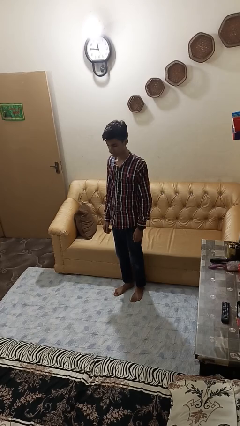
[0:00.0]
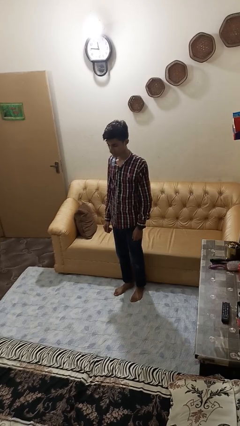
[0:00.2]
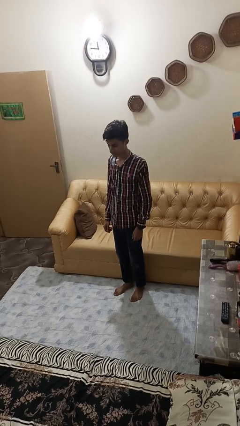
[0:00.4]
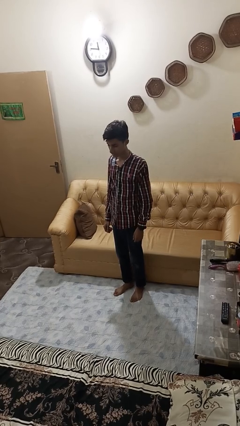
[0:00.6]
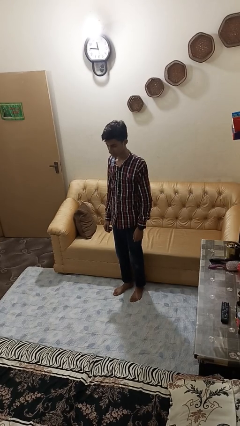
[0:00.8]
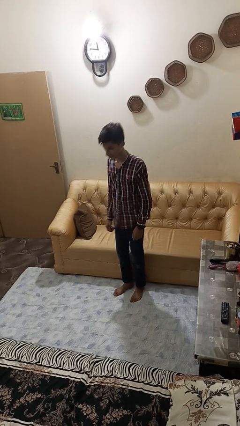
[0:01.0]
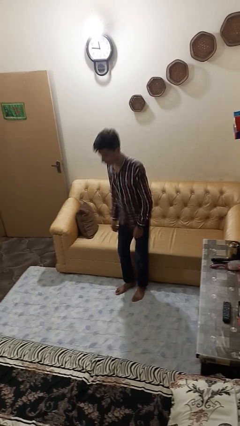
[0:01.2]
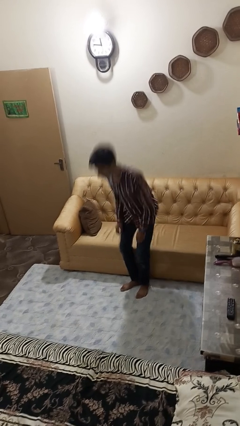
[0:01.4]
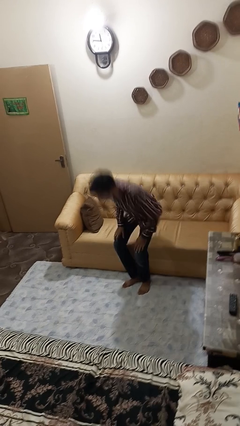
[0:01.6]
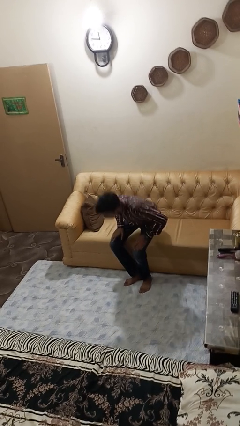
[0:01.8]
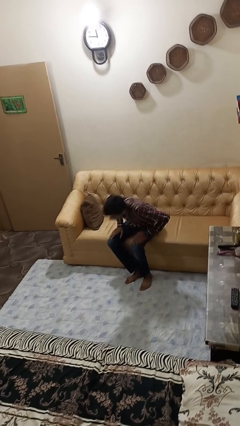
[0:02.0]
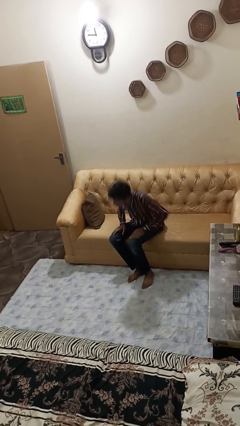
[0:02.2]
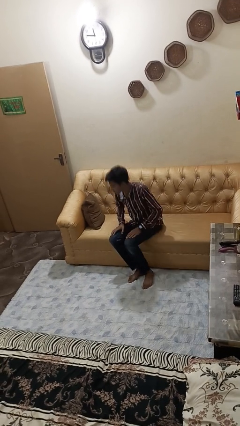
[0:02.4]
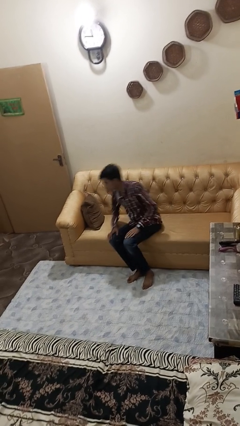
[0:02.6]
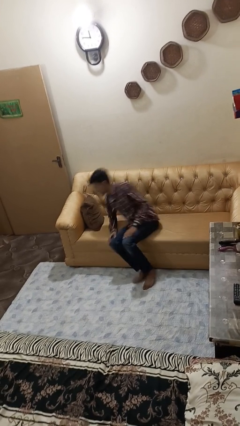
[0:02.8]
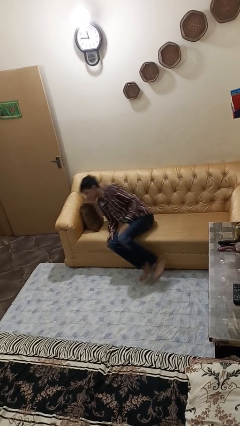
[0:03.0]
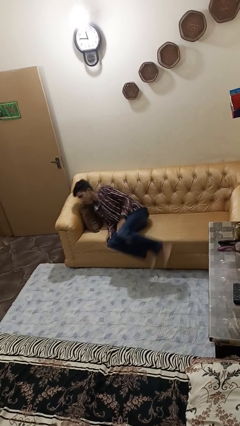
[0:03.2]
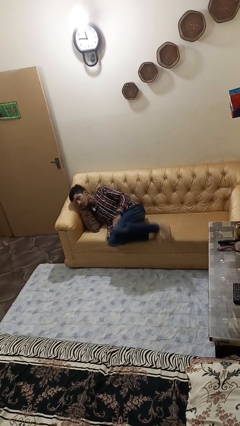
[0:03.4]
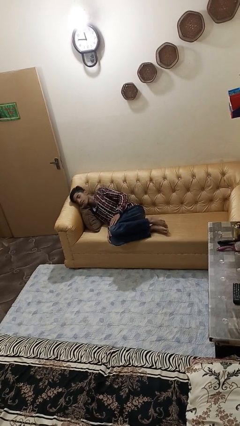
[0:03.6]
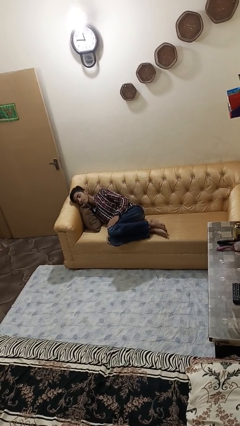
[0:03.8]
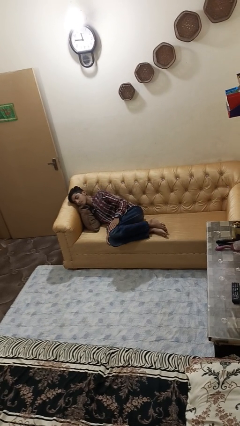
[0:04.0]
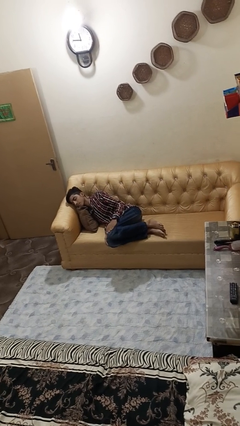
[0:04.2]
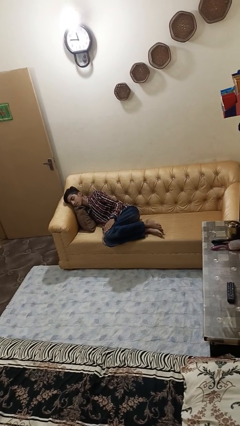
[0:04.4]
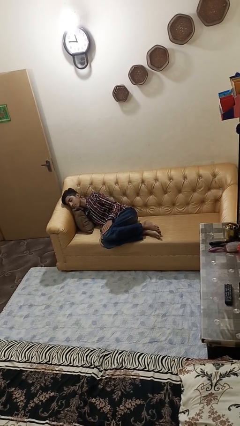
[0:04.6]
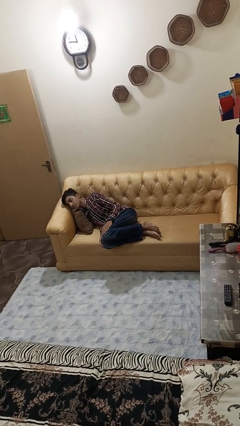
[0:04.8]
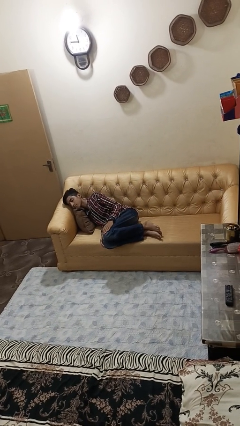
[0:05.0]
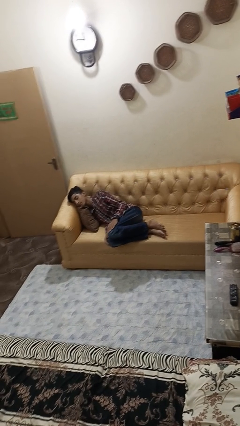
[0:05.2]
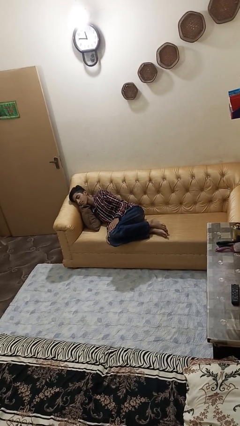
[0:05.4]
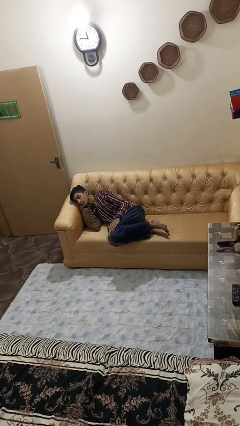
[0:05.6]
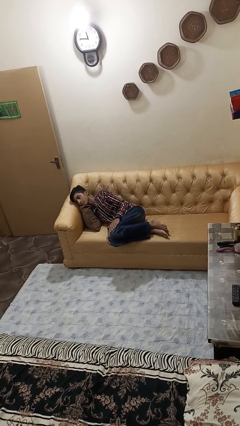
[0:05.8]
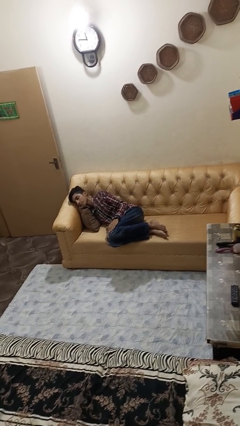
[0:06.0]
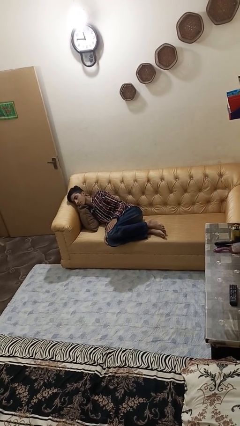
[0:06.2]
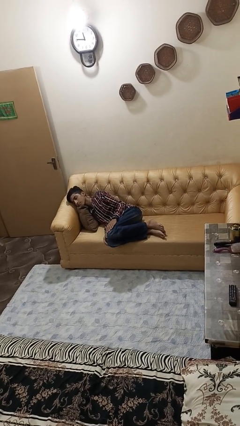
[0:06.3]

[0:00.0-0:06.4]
person lies down on couch

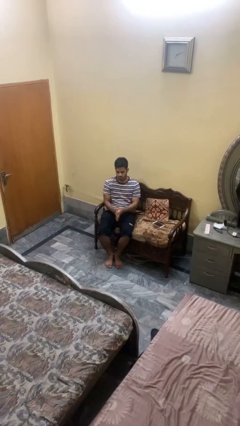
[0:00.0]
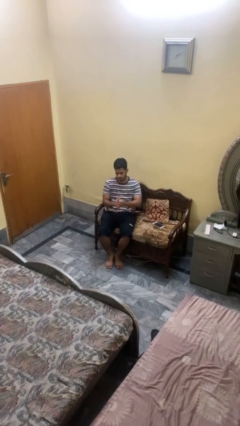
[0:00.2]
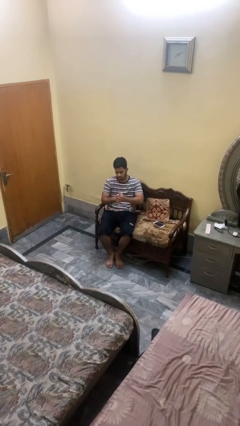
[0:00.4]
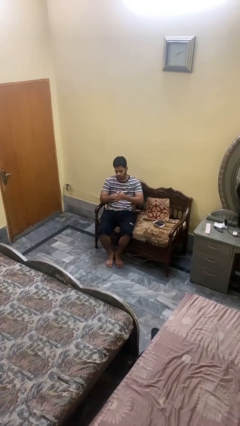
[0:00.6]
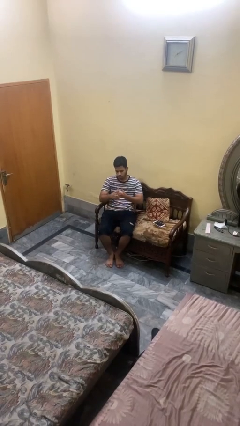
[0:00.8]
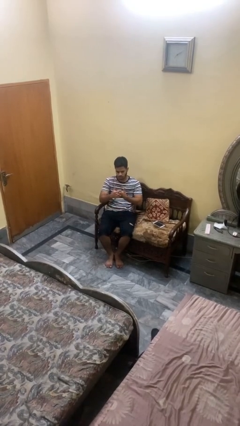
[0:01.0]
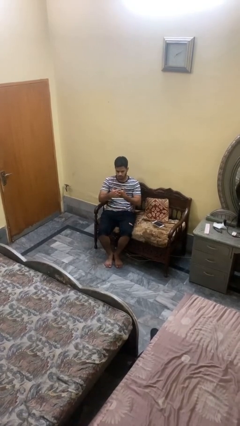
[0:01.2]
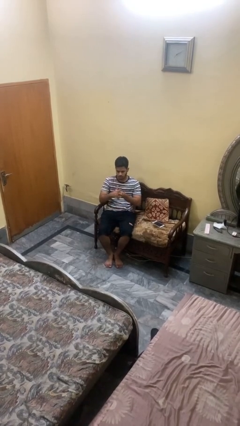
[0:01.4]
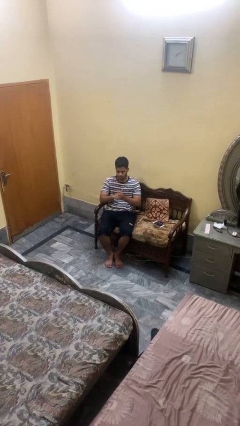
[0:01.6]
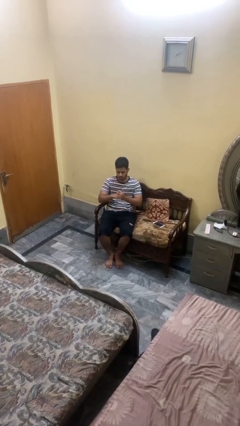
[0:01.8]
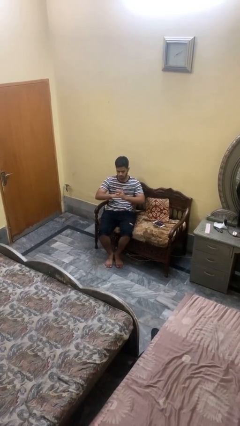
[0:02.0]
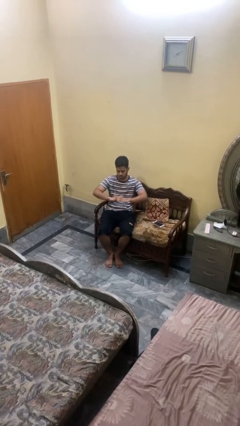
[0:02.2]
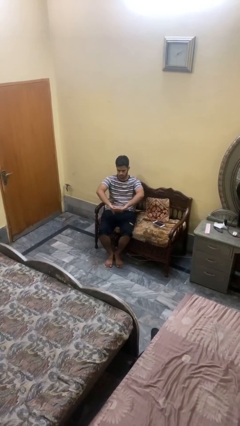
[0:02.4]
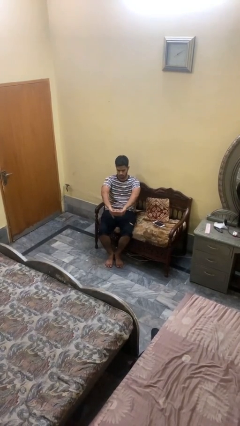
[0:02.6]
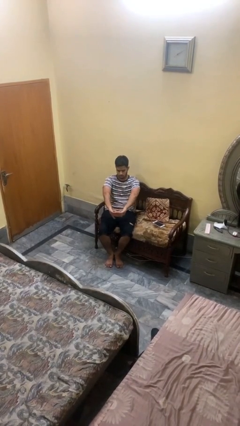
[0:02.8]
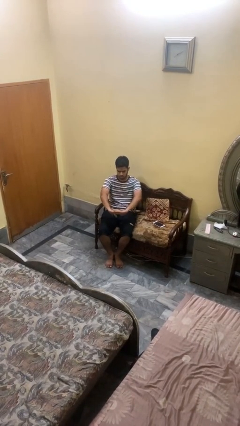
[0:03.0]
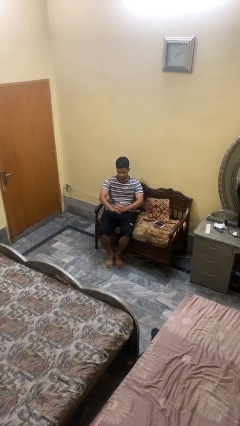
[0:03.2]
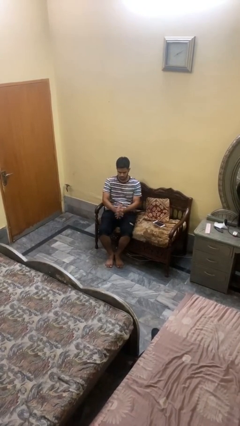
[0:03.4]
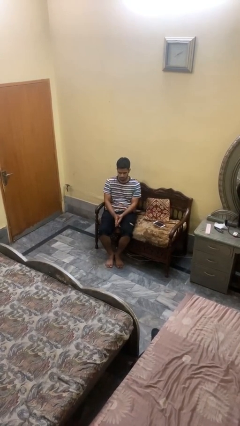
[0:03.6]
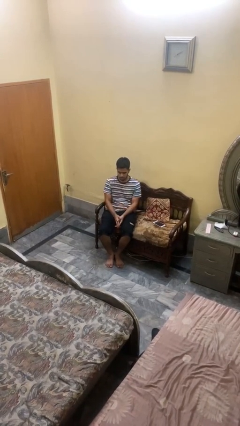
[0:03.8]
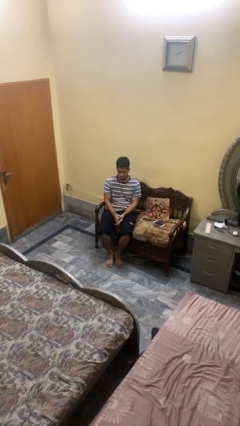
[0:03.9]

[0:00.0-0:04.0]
person cracks knuckles

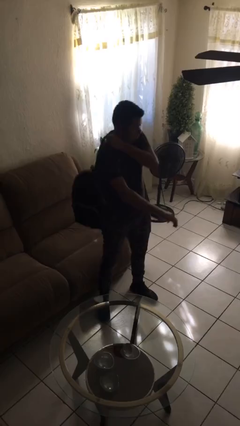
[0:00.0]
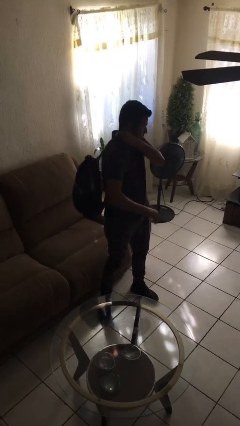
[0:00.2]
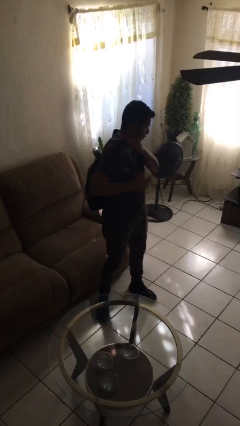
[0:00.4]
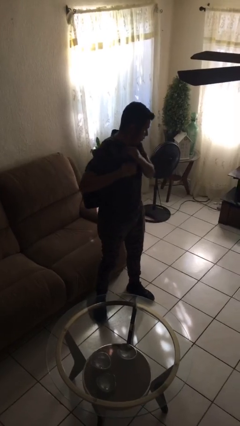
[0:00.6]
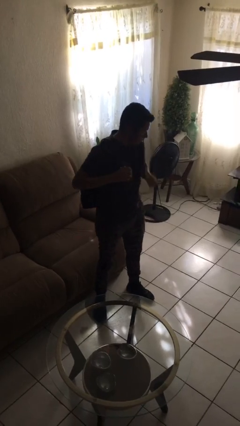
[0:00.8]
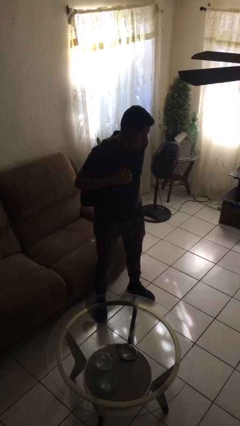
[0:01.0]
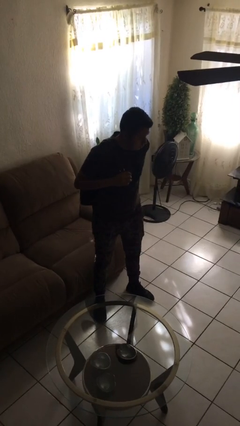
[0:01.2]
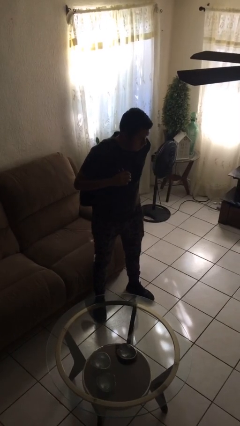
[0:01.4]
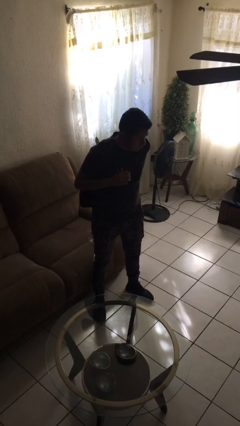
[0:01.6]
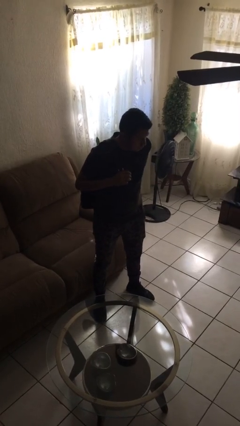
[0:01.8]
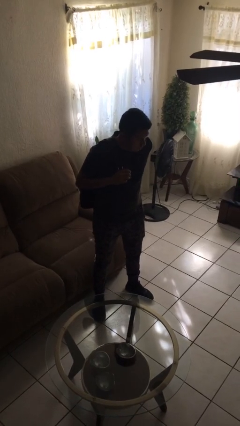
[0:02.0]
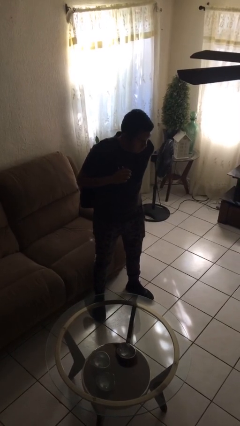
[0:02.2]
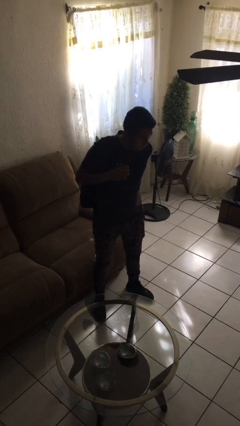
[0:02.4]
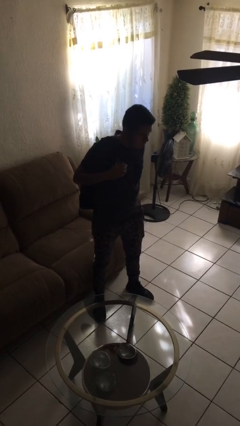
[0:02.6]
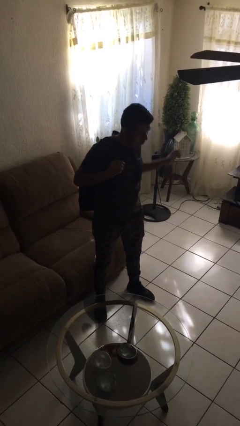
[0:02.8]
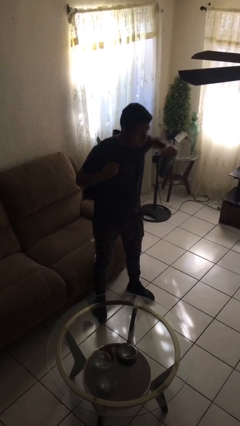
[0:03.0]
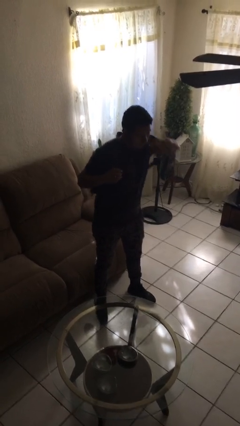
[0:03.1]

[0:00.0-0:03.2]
person puts on backpack

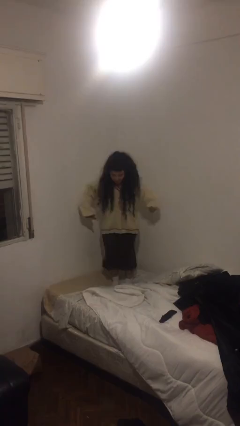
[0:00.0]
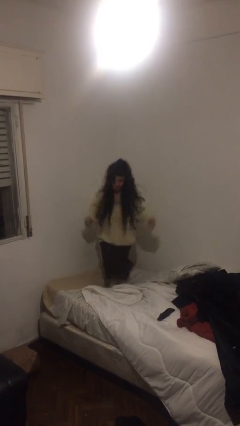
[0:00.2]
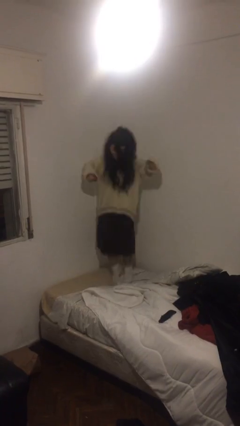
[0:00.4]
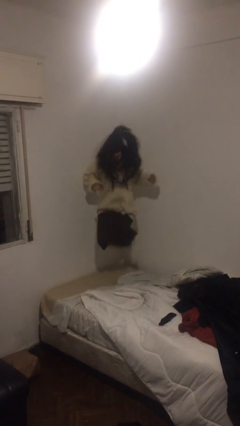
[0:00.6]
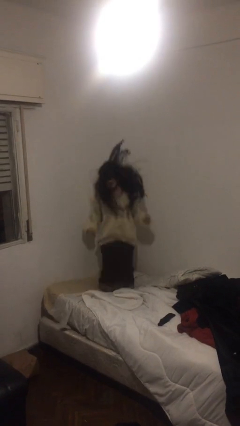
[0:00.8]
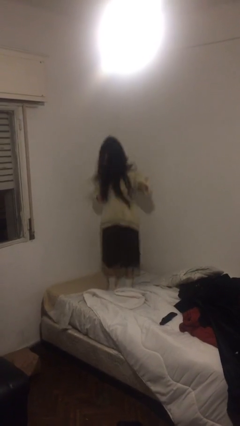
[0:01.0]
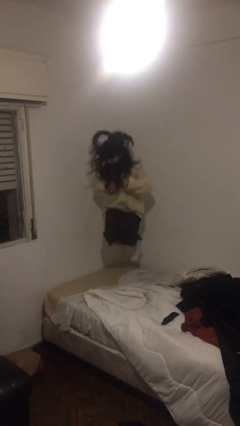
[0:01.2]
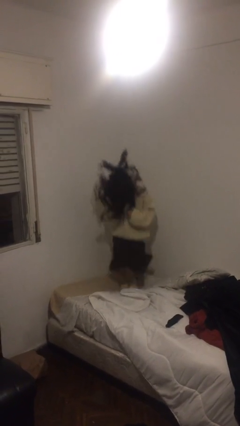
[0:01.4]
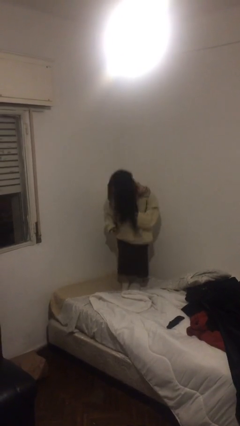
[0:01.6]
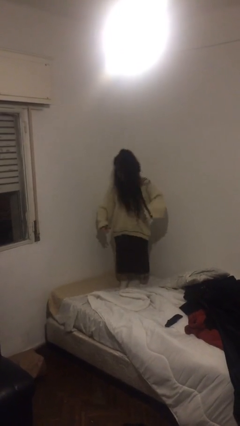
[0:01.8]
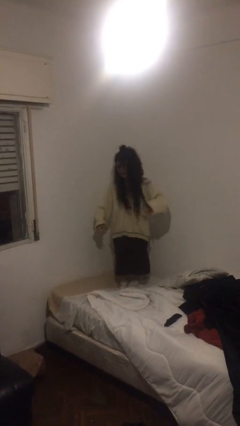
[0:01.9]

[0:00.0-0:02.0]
person jumps on bed

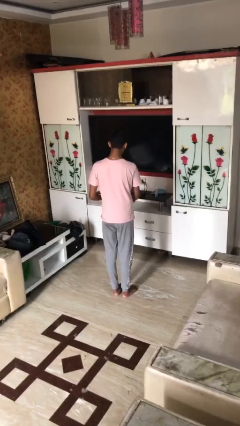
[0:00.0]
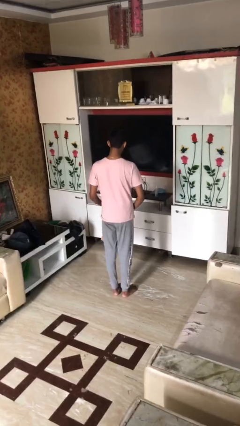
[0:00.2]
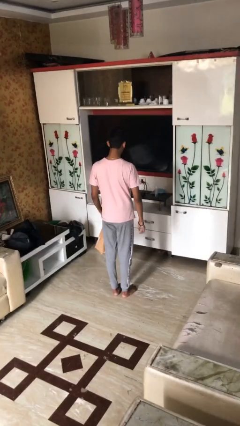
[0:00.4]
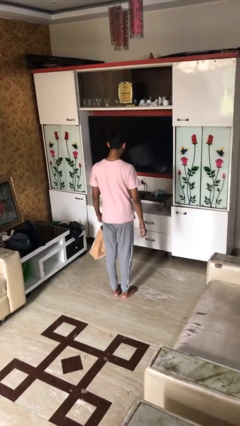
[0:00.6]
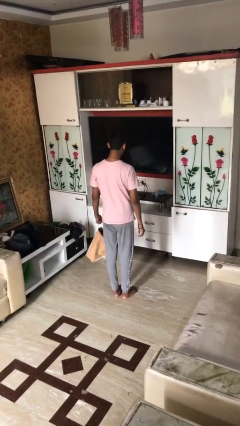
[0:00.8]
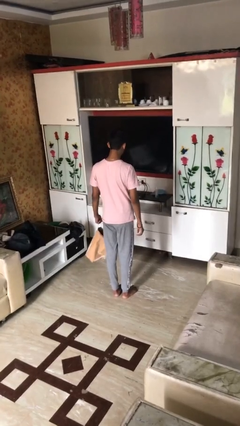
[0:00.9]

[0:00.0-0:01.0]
person puts object into bag

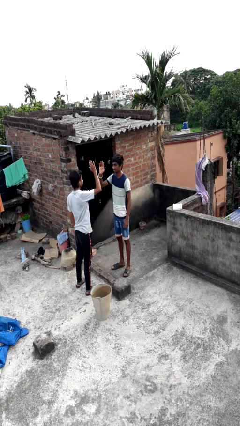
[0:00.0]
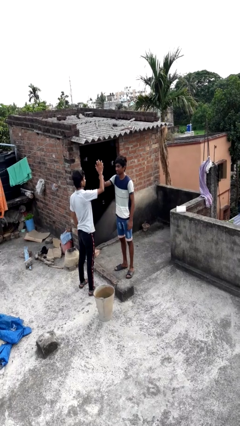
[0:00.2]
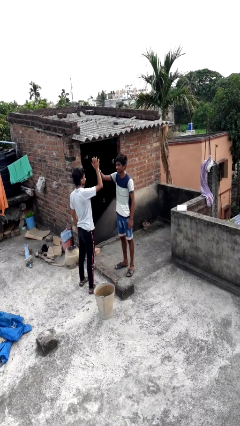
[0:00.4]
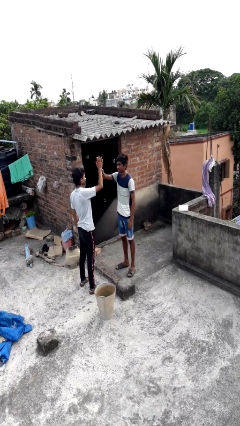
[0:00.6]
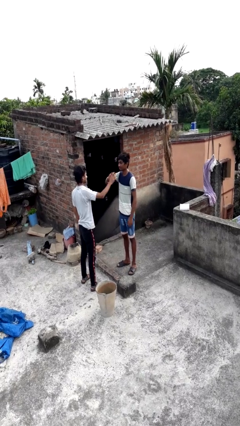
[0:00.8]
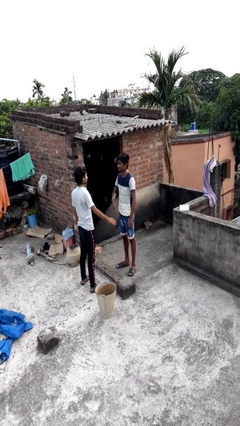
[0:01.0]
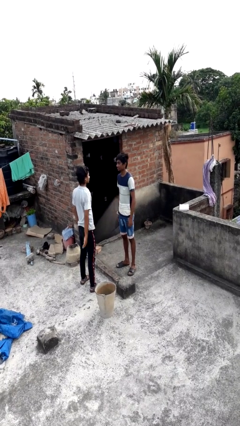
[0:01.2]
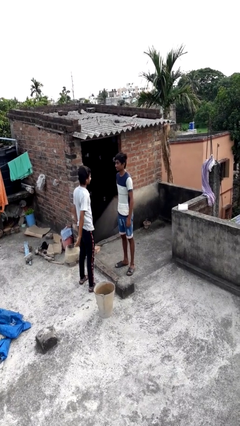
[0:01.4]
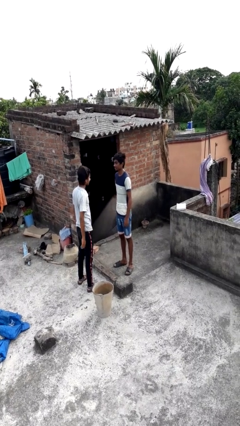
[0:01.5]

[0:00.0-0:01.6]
person highfives hand
